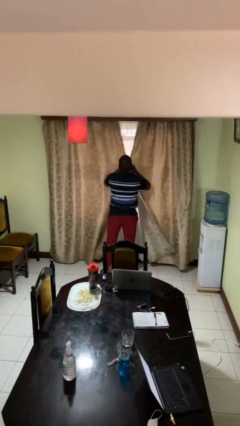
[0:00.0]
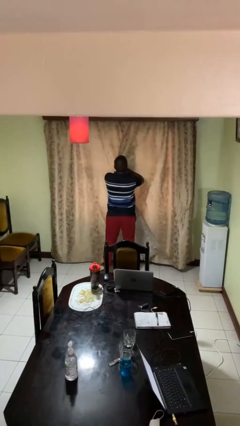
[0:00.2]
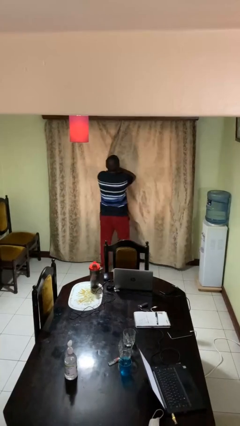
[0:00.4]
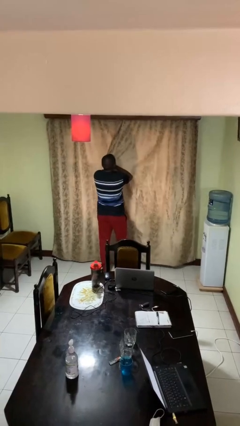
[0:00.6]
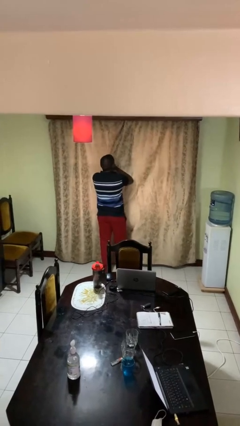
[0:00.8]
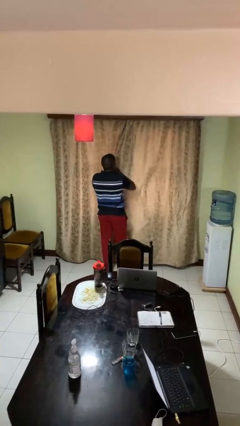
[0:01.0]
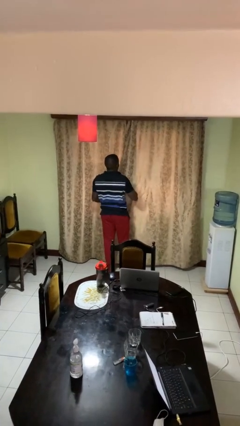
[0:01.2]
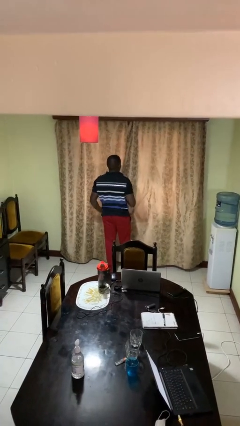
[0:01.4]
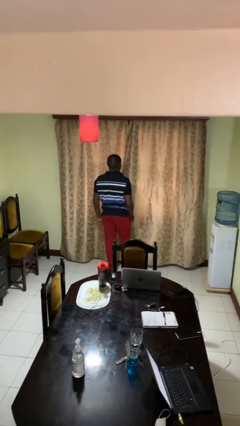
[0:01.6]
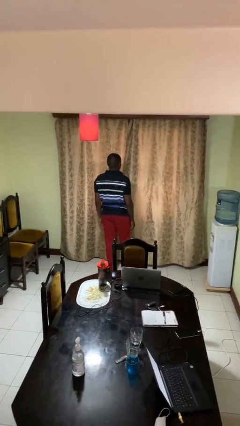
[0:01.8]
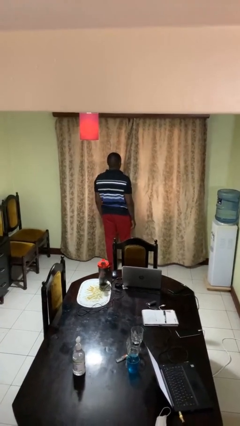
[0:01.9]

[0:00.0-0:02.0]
person closes curtains

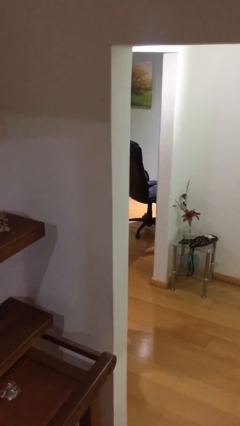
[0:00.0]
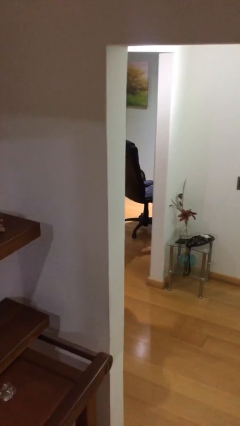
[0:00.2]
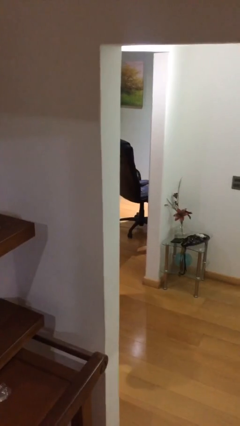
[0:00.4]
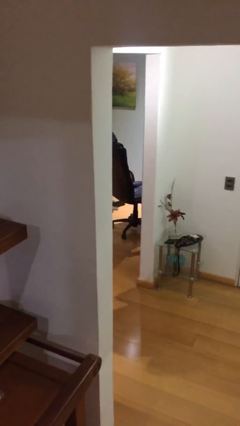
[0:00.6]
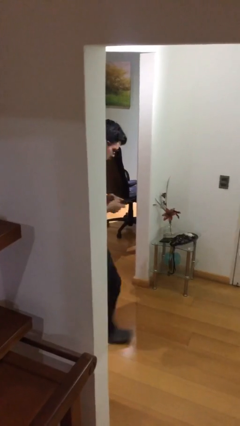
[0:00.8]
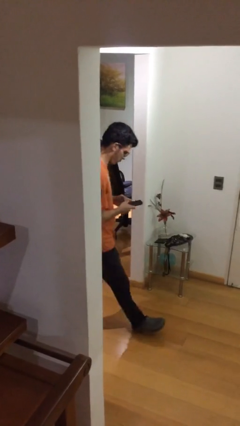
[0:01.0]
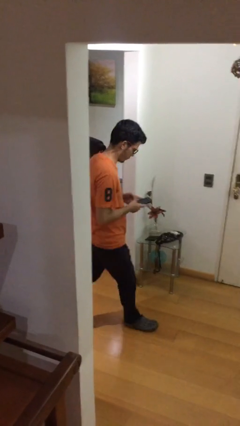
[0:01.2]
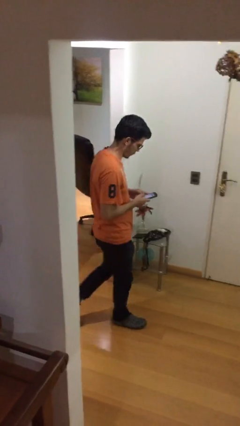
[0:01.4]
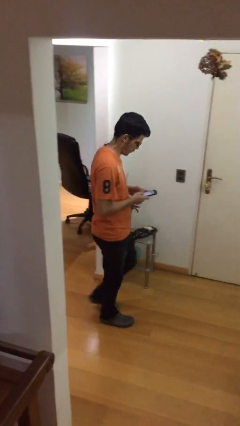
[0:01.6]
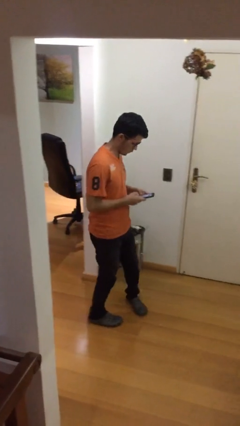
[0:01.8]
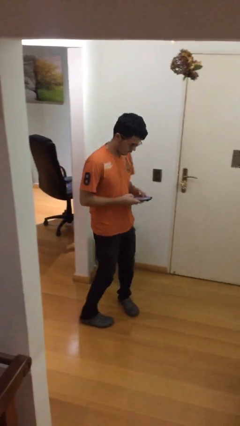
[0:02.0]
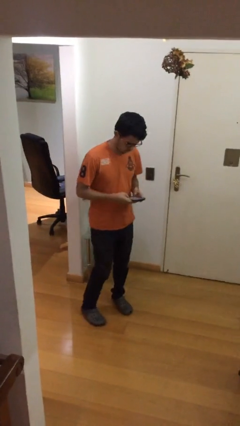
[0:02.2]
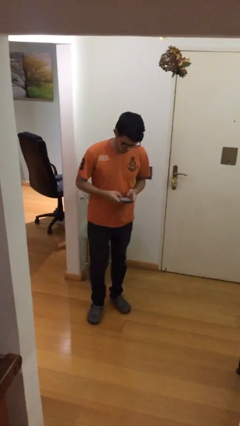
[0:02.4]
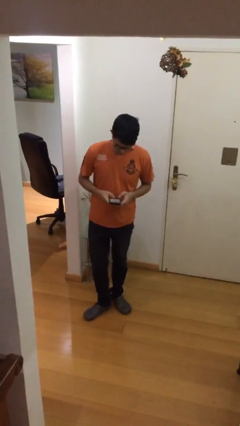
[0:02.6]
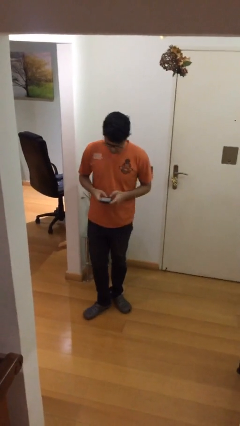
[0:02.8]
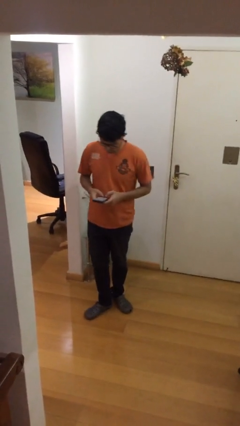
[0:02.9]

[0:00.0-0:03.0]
person enters scene through structure

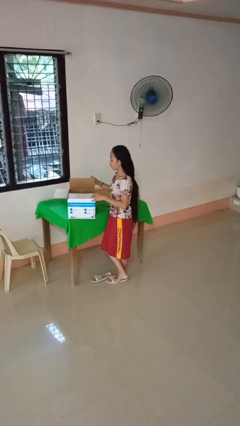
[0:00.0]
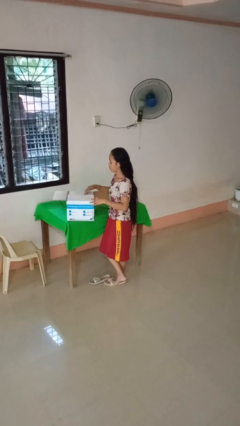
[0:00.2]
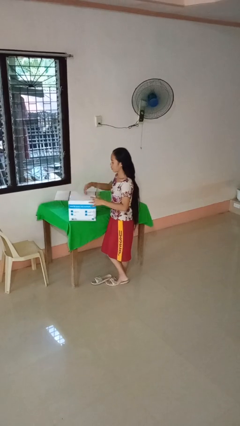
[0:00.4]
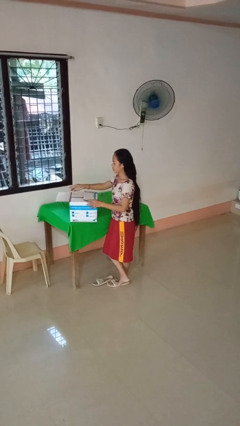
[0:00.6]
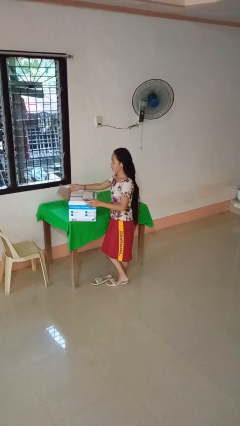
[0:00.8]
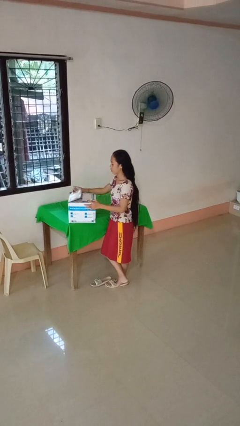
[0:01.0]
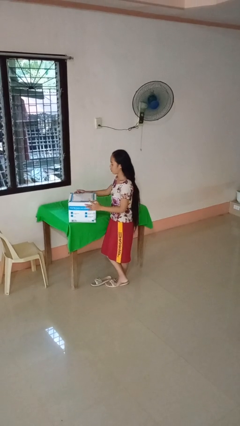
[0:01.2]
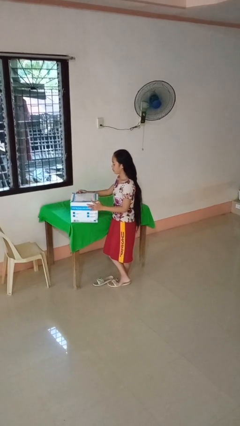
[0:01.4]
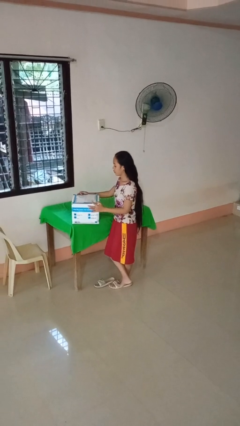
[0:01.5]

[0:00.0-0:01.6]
person closes box

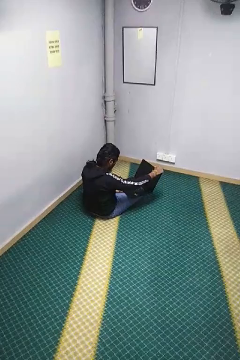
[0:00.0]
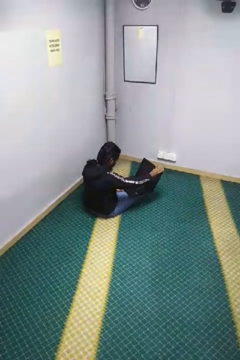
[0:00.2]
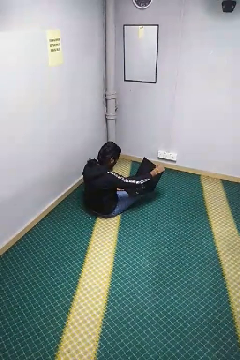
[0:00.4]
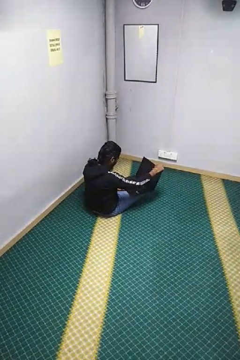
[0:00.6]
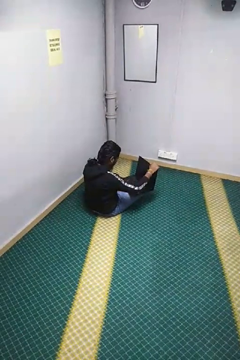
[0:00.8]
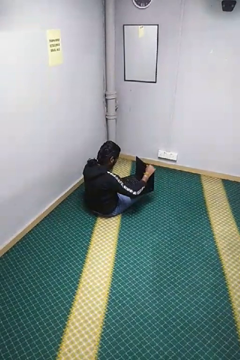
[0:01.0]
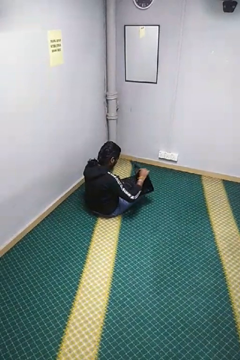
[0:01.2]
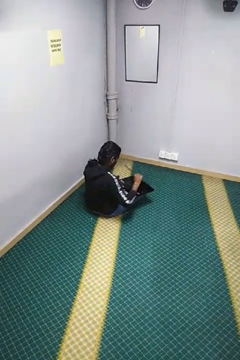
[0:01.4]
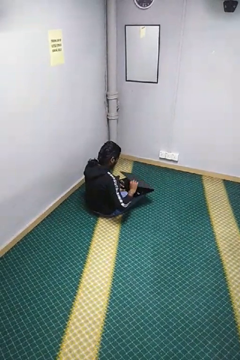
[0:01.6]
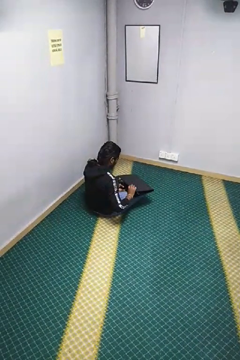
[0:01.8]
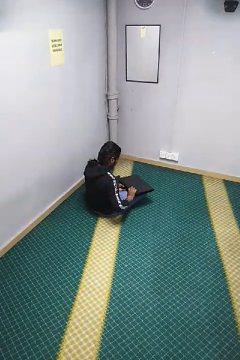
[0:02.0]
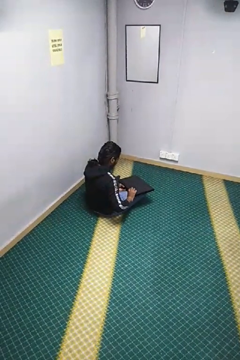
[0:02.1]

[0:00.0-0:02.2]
person closes laptop

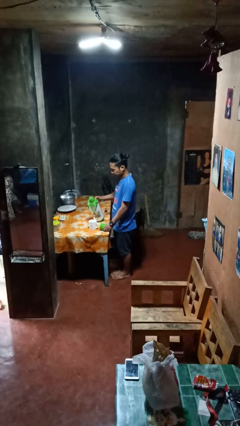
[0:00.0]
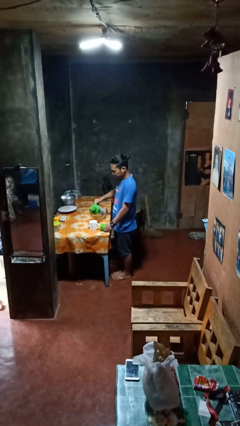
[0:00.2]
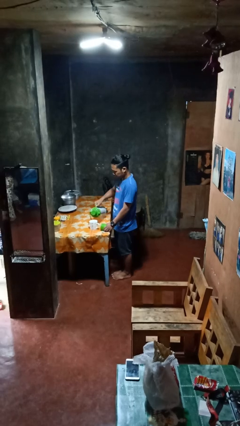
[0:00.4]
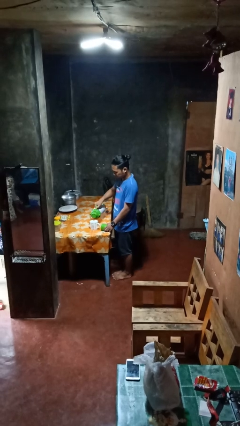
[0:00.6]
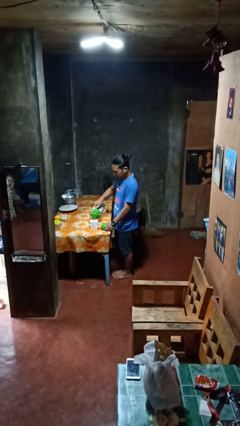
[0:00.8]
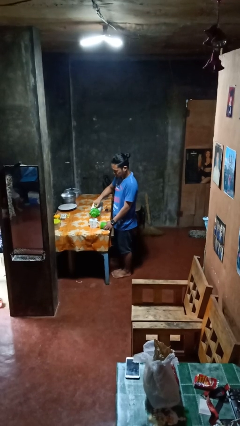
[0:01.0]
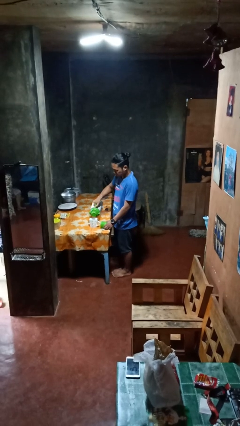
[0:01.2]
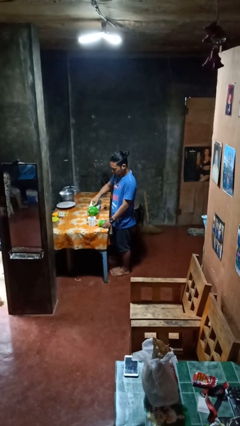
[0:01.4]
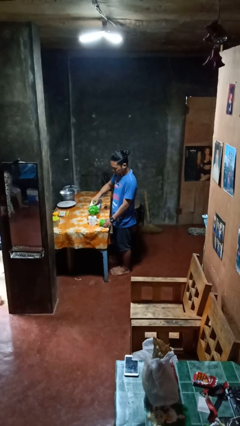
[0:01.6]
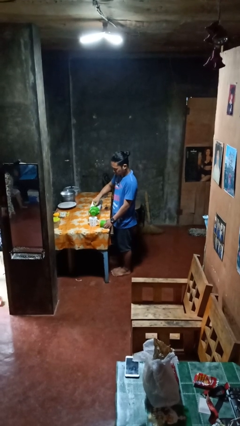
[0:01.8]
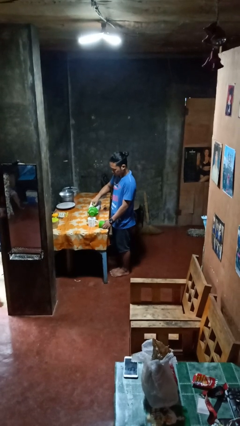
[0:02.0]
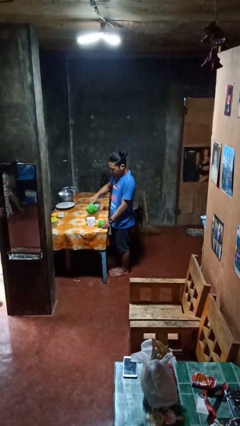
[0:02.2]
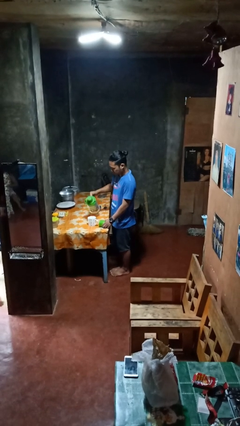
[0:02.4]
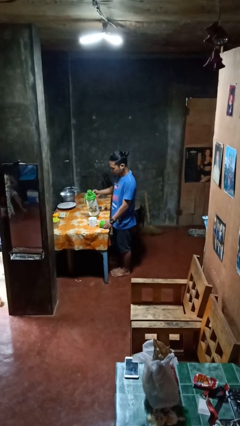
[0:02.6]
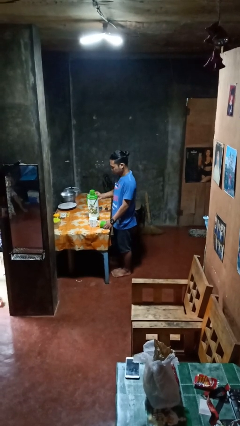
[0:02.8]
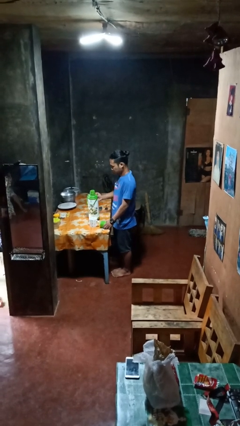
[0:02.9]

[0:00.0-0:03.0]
person pours coffee into mug

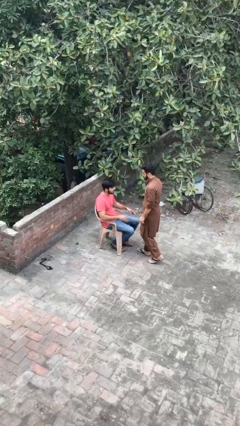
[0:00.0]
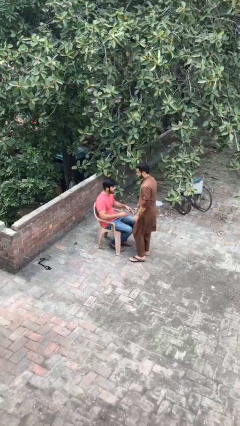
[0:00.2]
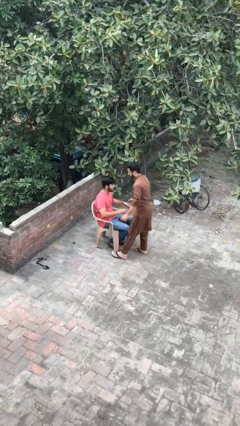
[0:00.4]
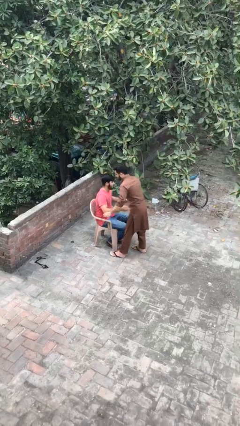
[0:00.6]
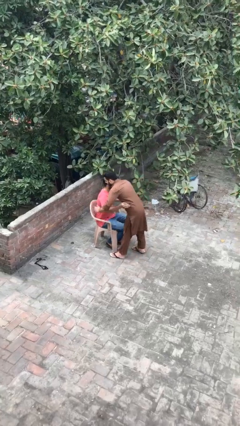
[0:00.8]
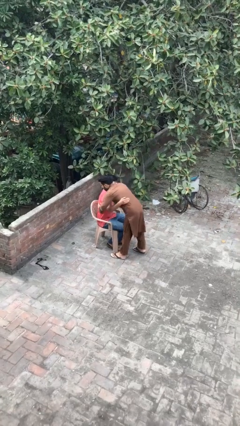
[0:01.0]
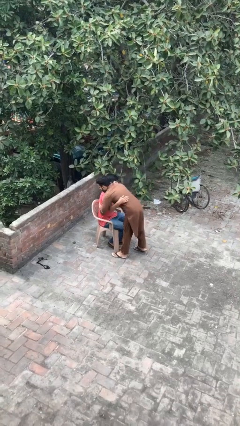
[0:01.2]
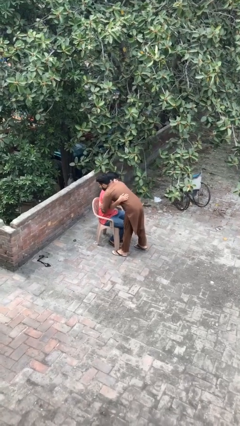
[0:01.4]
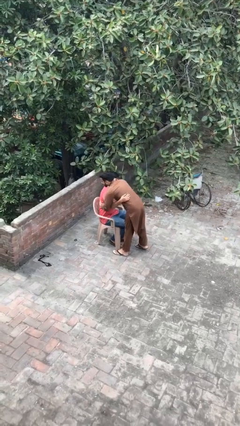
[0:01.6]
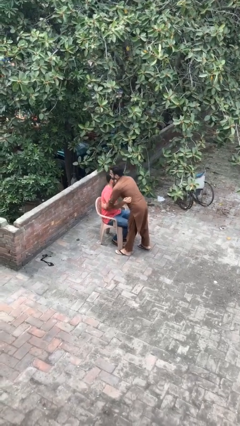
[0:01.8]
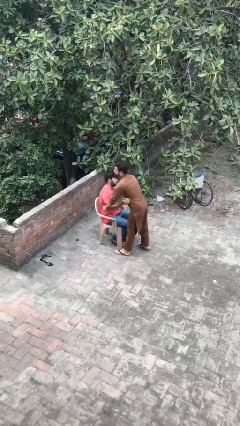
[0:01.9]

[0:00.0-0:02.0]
person embraces person

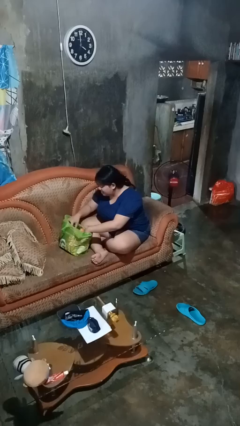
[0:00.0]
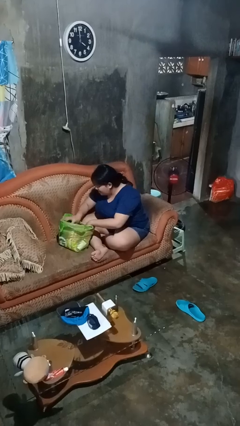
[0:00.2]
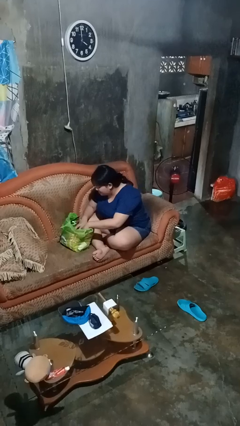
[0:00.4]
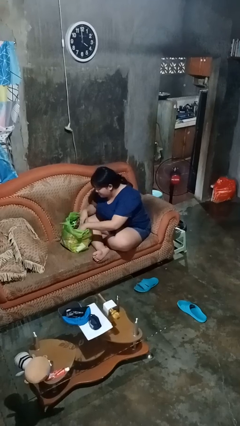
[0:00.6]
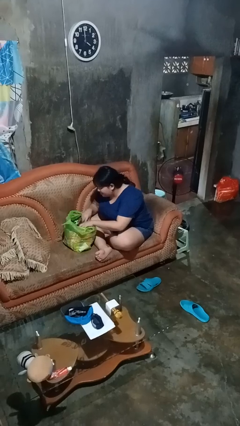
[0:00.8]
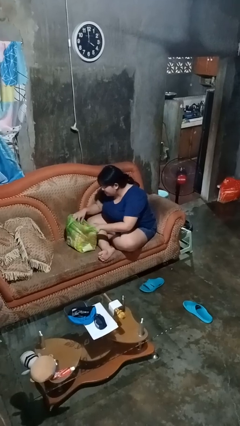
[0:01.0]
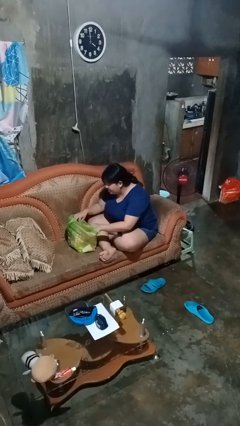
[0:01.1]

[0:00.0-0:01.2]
person searches in bag

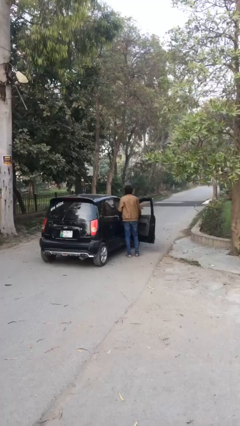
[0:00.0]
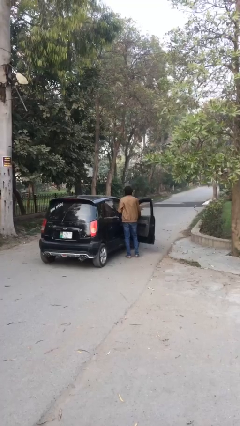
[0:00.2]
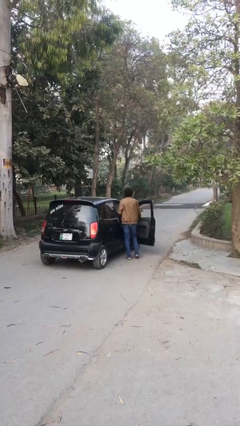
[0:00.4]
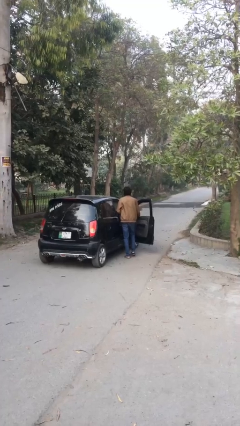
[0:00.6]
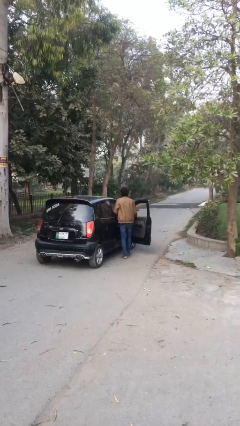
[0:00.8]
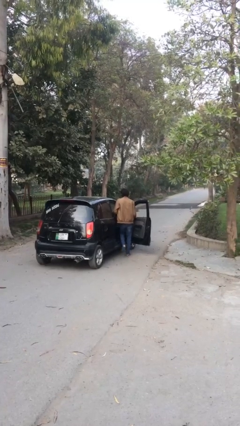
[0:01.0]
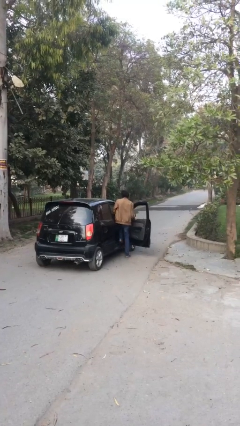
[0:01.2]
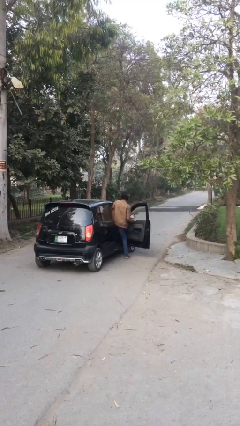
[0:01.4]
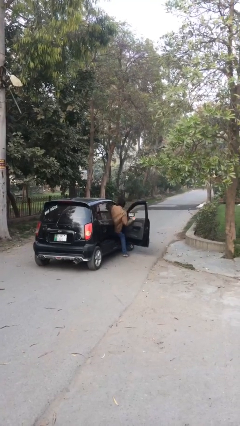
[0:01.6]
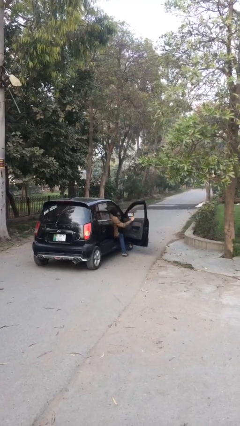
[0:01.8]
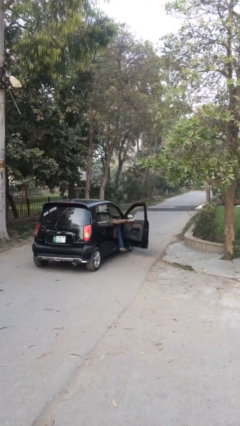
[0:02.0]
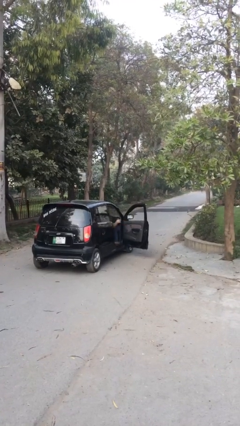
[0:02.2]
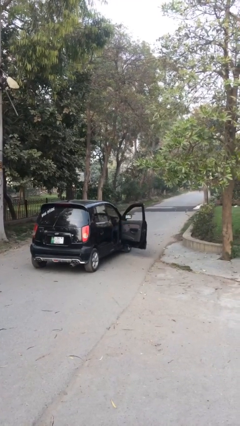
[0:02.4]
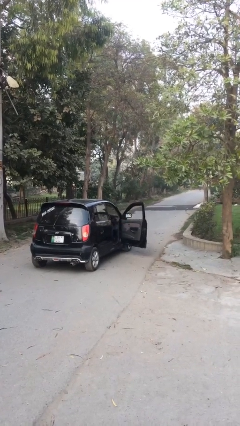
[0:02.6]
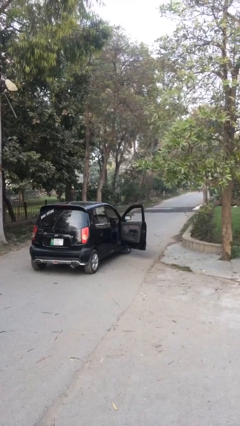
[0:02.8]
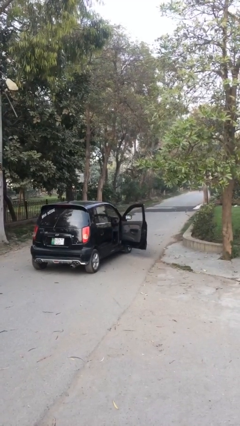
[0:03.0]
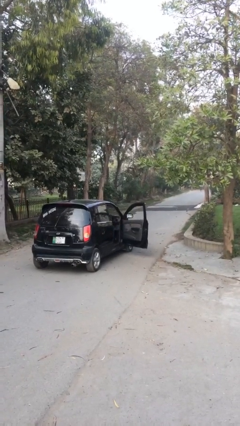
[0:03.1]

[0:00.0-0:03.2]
person enters car
